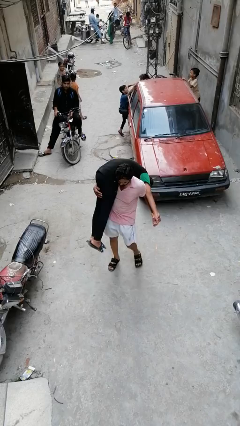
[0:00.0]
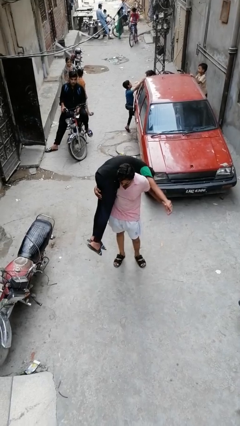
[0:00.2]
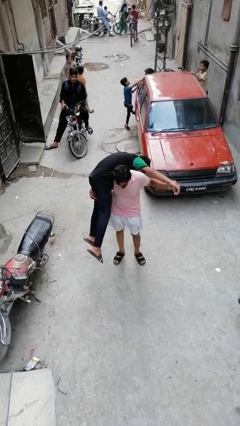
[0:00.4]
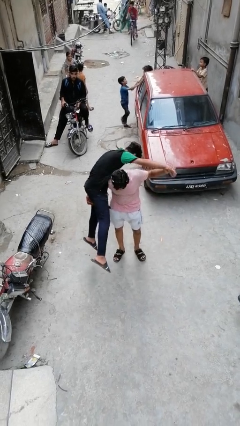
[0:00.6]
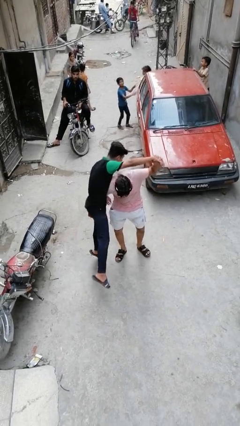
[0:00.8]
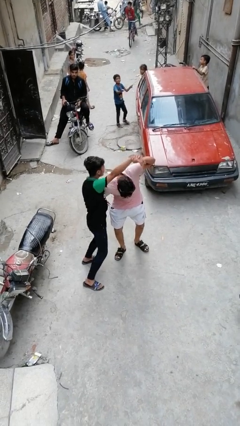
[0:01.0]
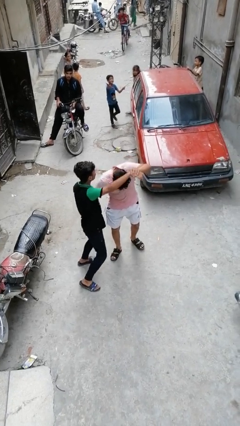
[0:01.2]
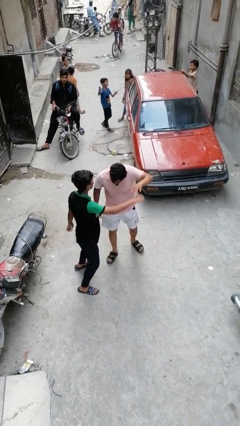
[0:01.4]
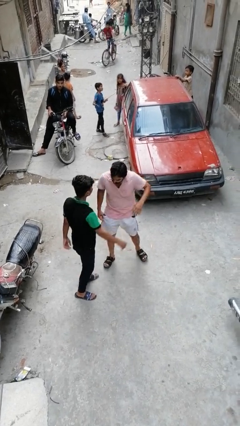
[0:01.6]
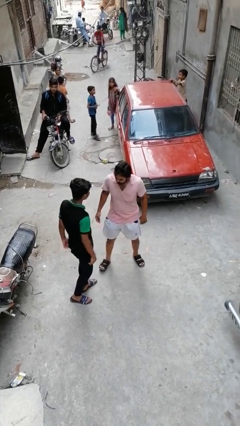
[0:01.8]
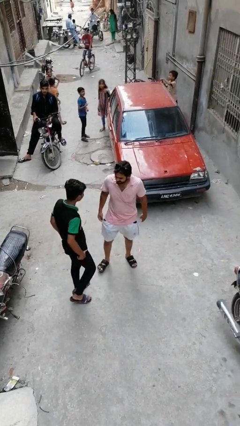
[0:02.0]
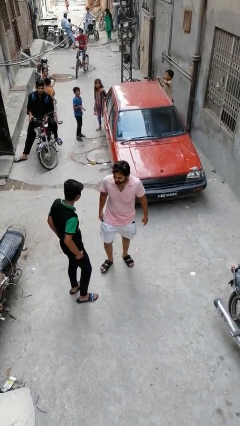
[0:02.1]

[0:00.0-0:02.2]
person puts down person

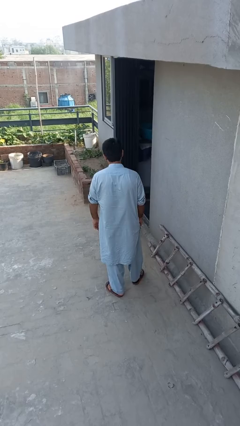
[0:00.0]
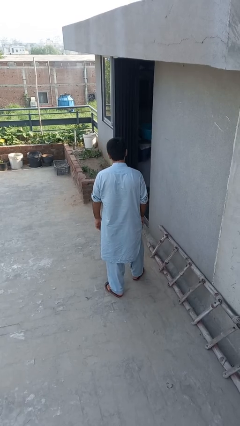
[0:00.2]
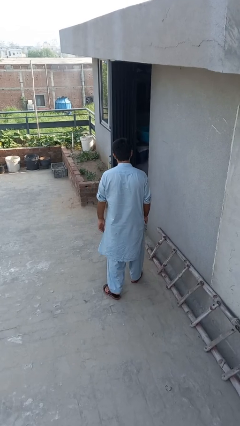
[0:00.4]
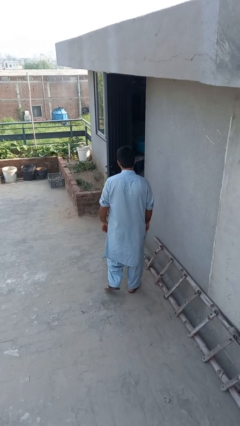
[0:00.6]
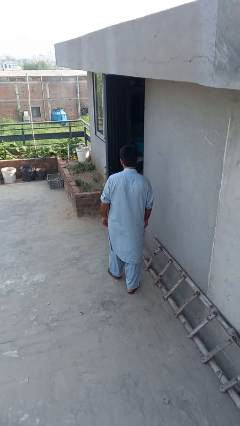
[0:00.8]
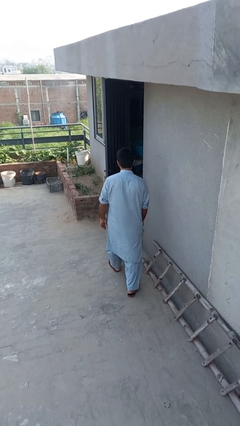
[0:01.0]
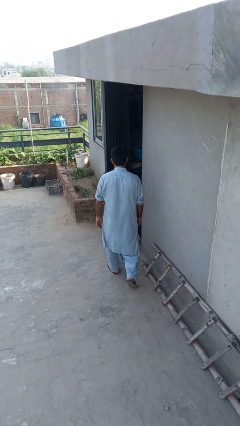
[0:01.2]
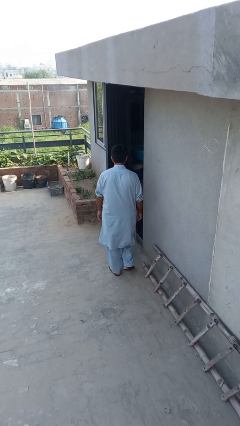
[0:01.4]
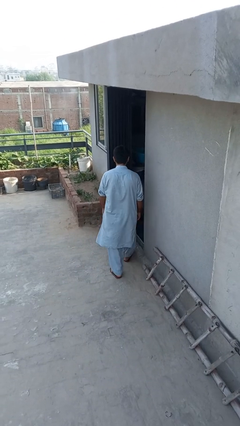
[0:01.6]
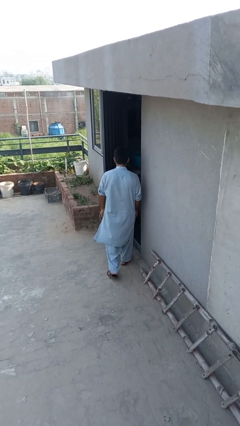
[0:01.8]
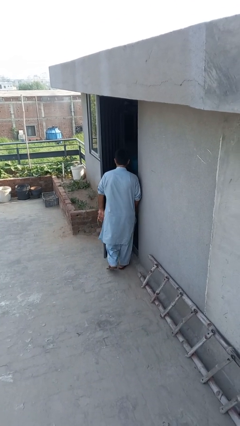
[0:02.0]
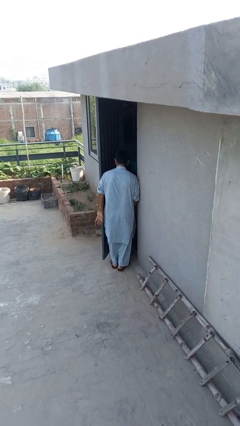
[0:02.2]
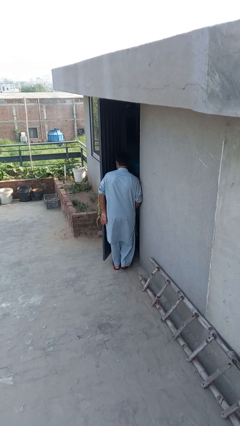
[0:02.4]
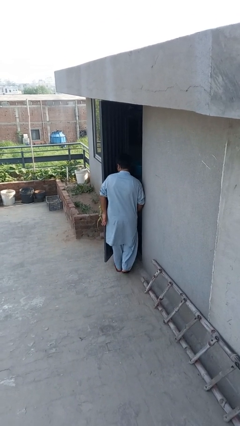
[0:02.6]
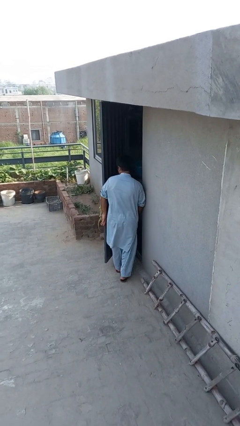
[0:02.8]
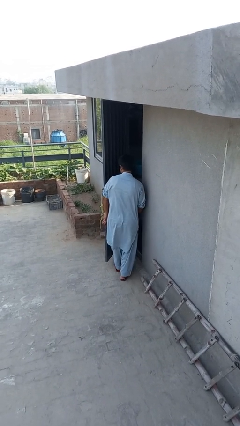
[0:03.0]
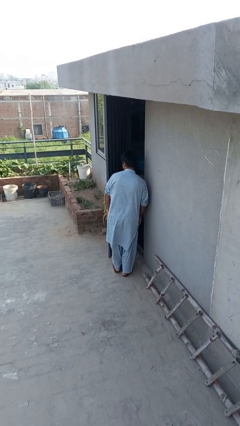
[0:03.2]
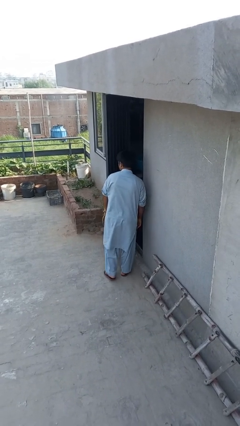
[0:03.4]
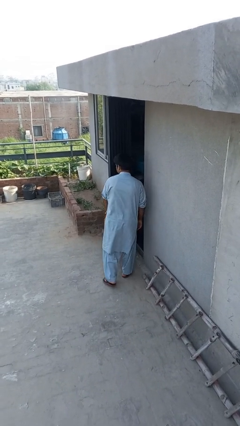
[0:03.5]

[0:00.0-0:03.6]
person bumps into wall

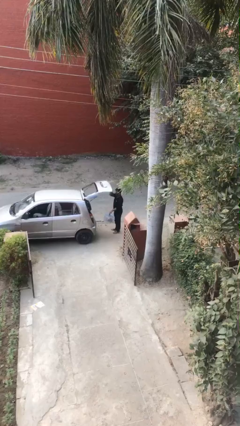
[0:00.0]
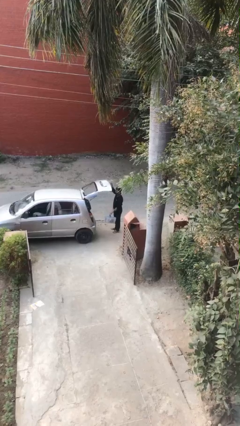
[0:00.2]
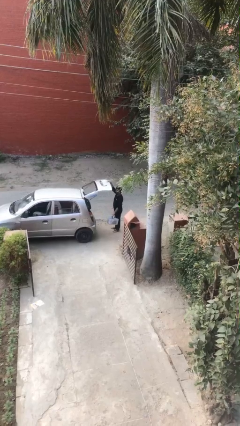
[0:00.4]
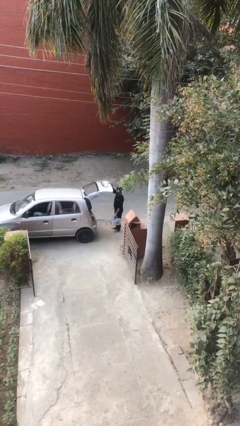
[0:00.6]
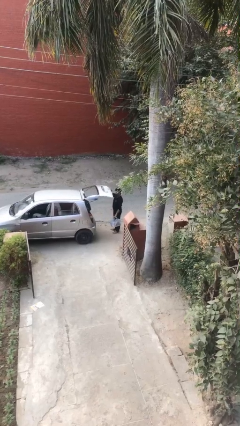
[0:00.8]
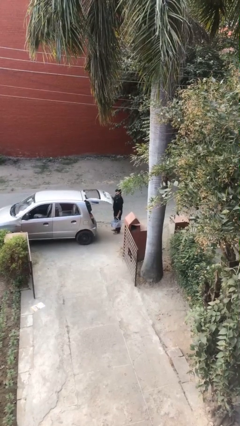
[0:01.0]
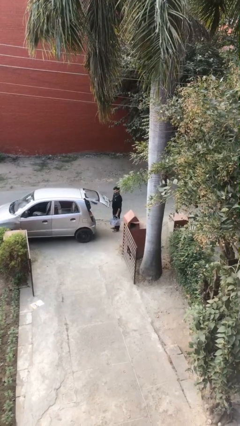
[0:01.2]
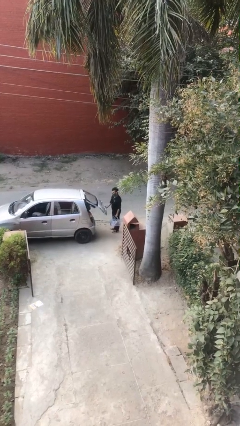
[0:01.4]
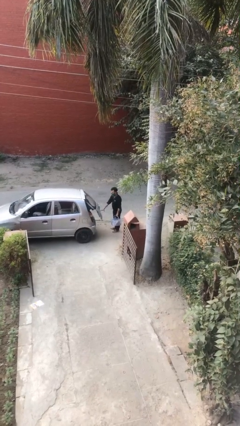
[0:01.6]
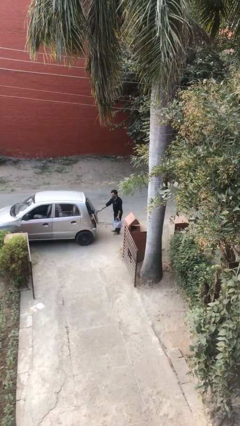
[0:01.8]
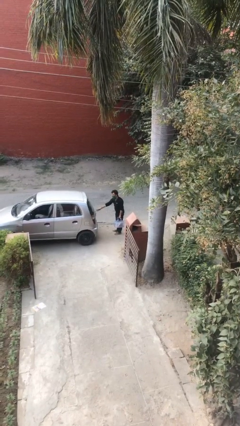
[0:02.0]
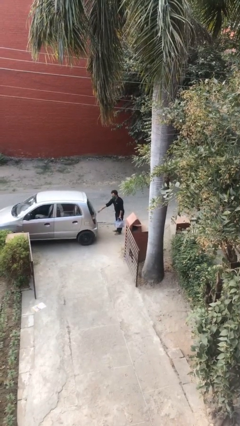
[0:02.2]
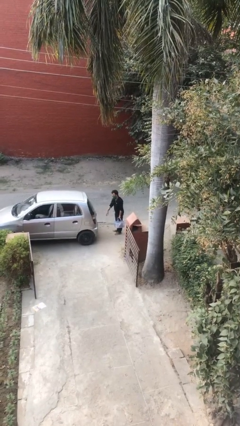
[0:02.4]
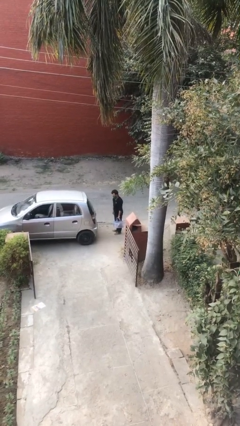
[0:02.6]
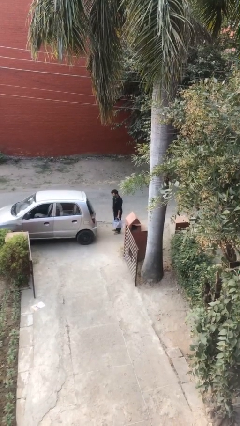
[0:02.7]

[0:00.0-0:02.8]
person closes car trunk

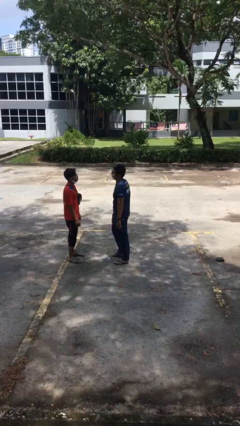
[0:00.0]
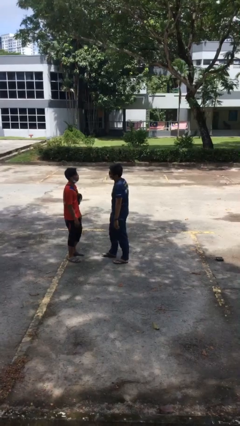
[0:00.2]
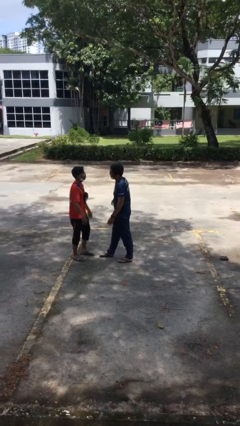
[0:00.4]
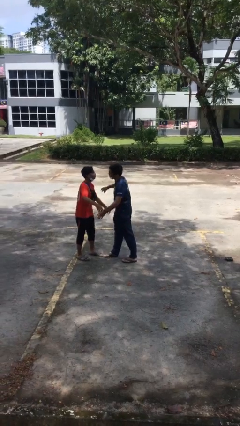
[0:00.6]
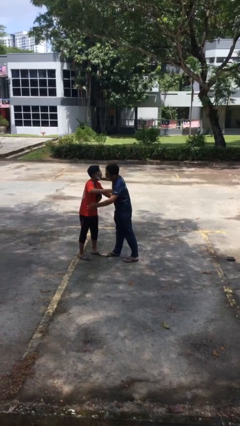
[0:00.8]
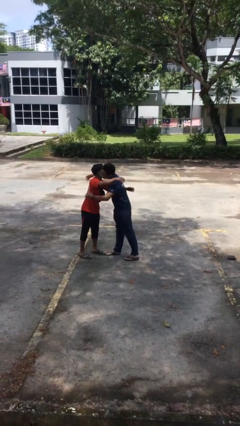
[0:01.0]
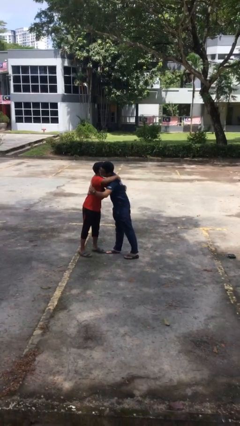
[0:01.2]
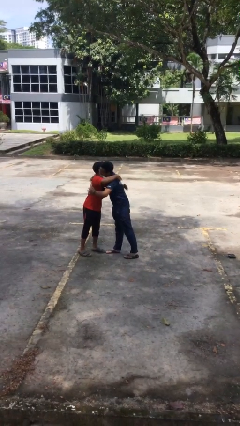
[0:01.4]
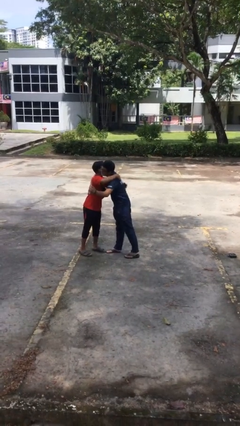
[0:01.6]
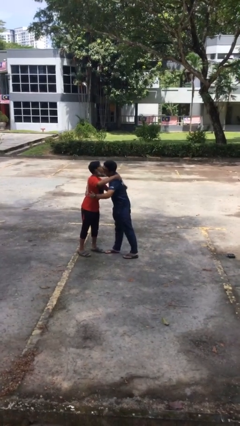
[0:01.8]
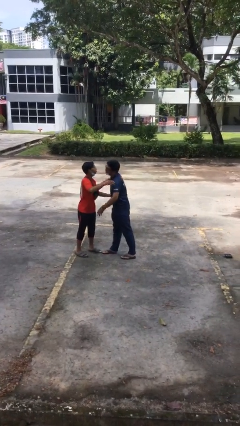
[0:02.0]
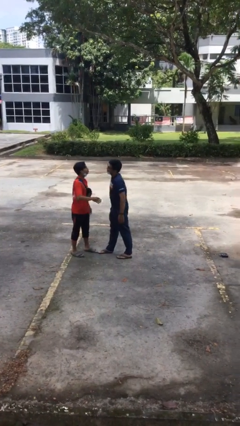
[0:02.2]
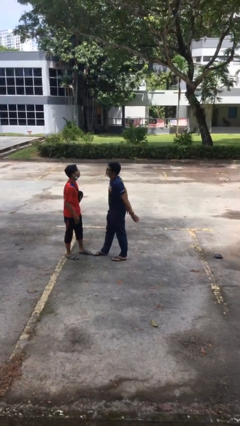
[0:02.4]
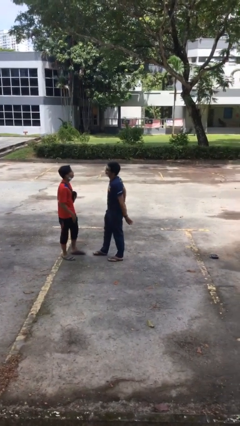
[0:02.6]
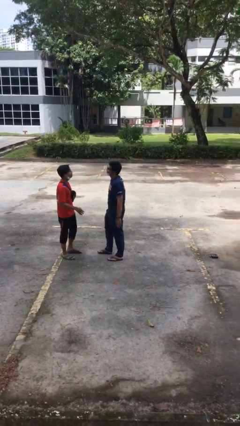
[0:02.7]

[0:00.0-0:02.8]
person embraces person

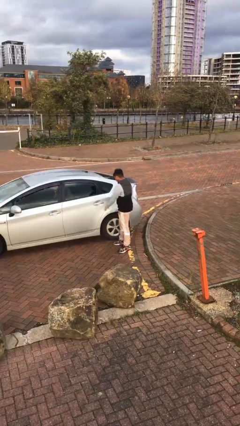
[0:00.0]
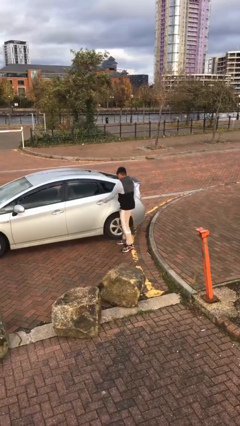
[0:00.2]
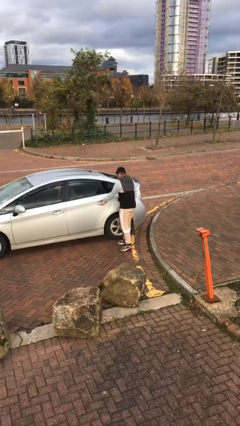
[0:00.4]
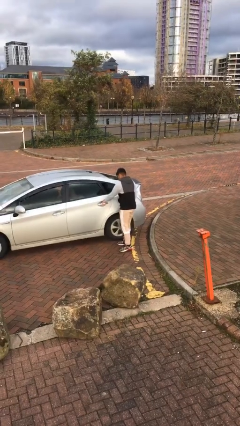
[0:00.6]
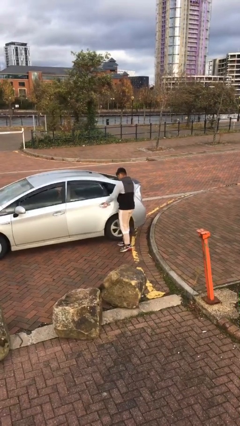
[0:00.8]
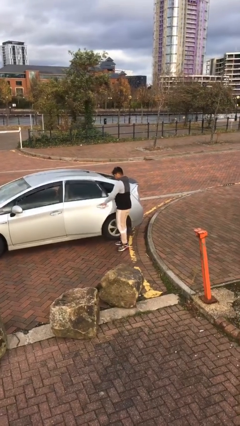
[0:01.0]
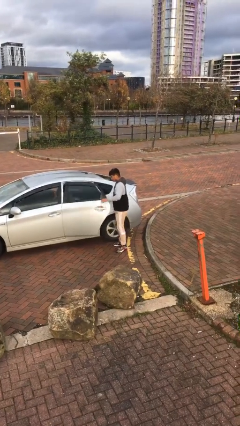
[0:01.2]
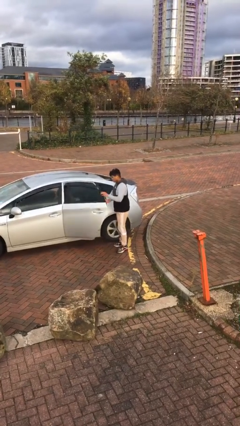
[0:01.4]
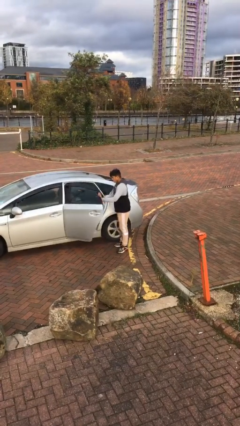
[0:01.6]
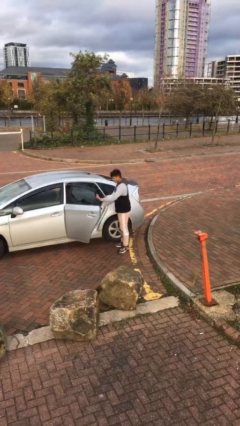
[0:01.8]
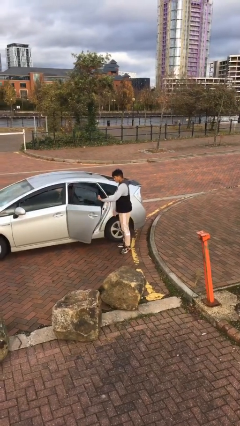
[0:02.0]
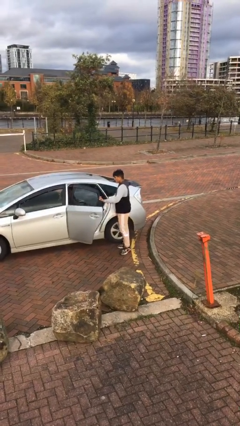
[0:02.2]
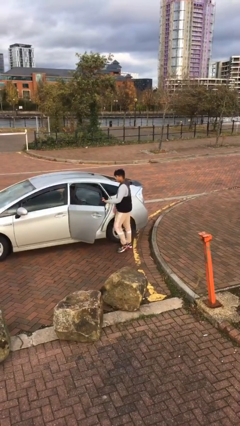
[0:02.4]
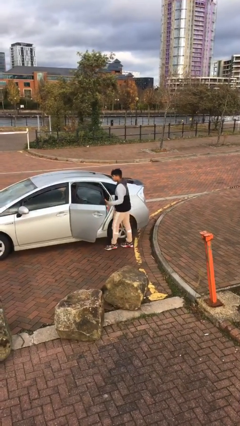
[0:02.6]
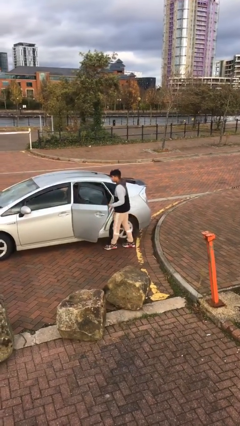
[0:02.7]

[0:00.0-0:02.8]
person opens car door

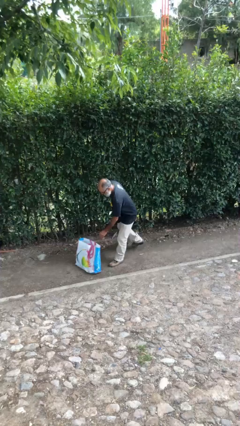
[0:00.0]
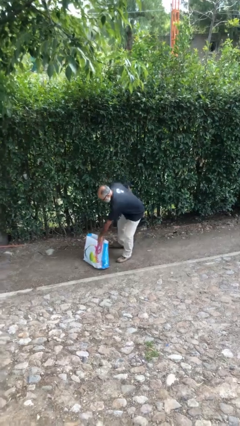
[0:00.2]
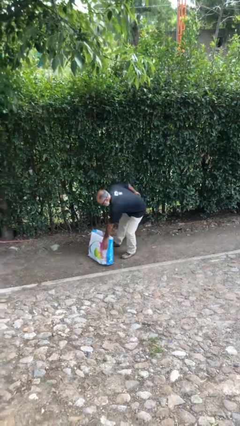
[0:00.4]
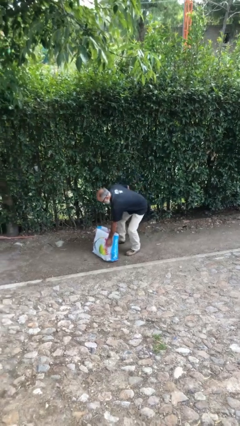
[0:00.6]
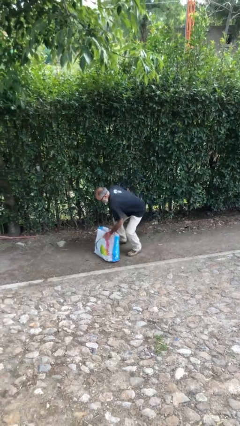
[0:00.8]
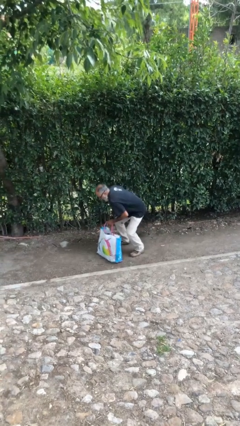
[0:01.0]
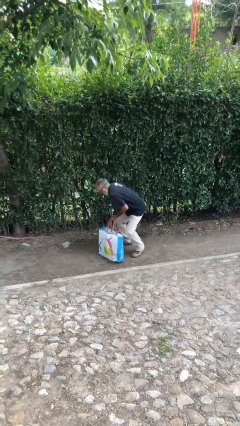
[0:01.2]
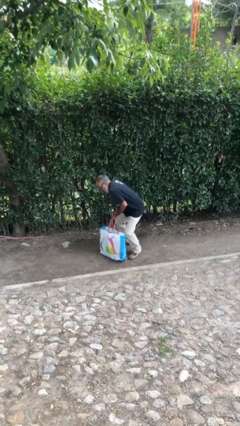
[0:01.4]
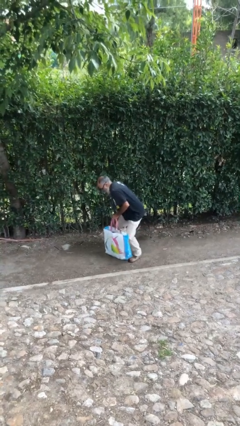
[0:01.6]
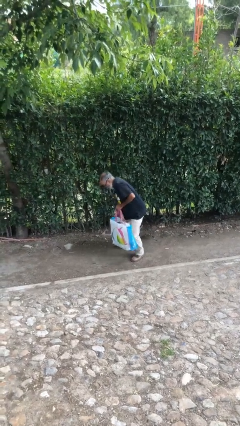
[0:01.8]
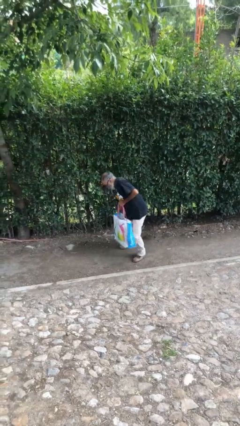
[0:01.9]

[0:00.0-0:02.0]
person picks up object from floor

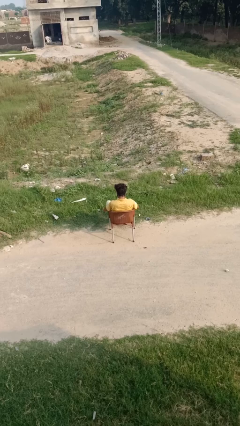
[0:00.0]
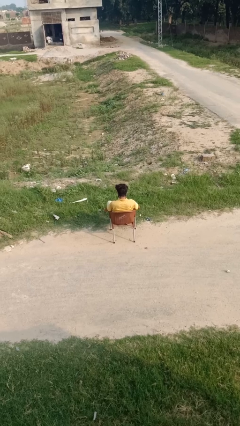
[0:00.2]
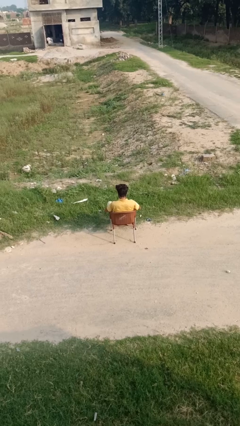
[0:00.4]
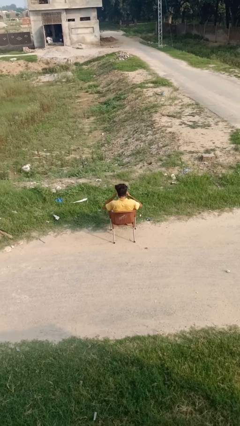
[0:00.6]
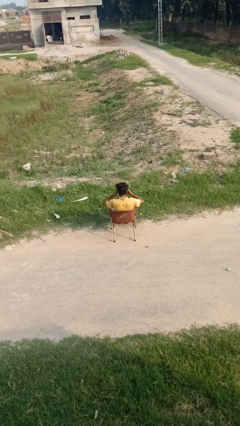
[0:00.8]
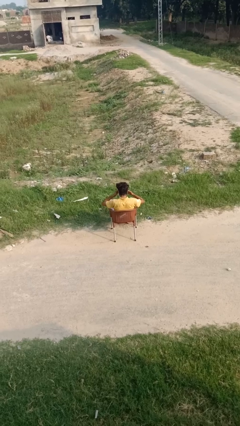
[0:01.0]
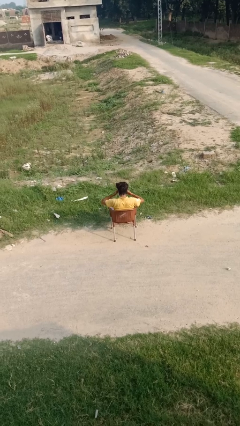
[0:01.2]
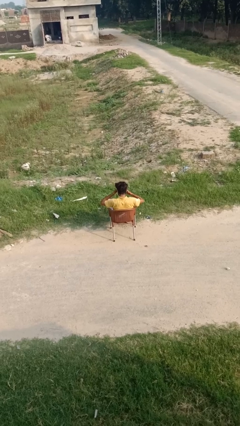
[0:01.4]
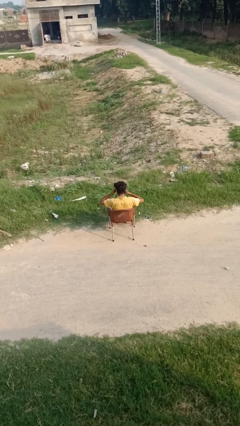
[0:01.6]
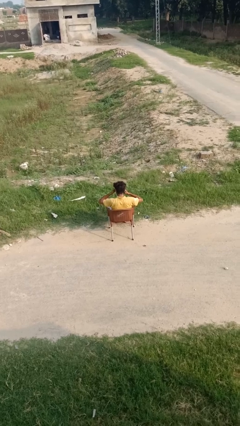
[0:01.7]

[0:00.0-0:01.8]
person rubs eyes
